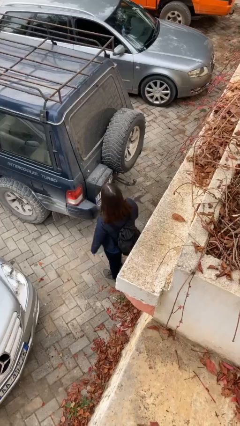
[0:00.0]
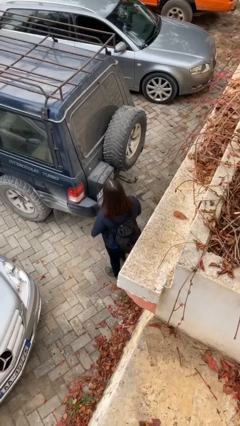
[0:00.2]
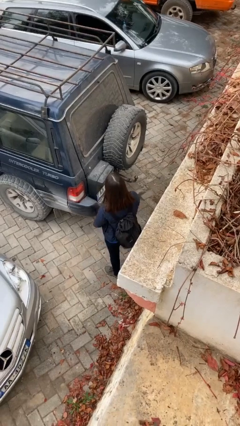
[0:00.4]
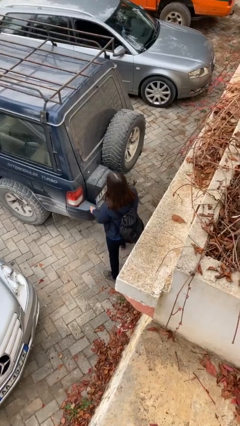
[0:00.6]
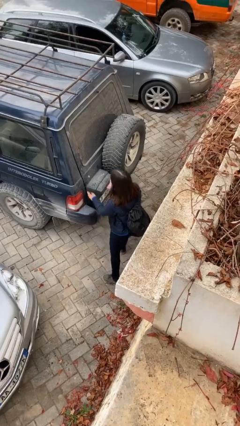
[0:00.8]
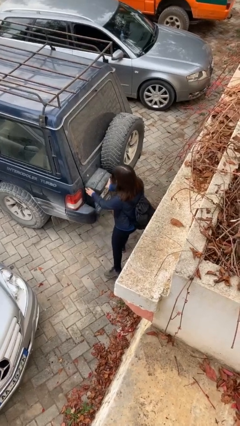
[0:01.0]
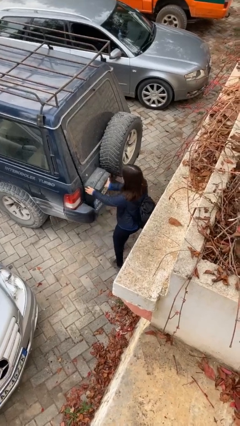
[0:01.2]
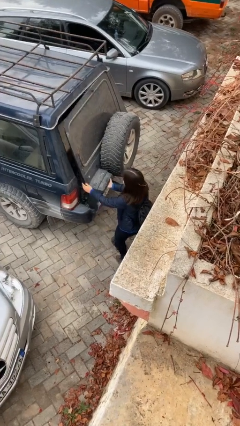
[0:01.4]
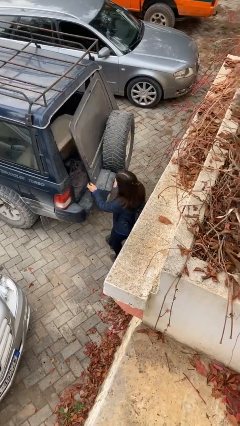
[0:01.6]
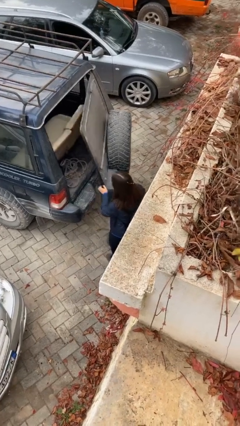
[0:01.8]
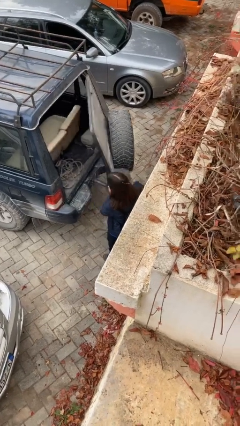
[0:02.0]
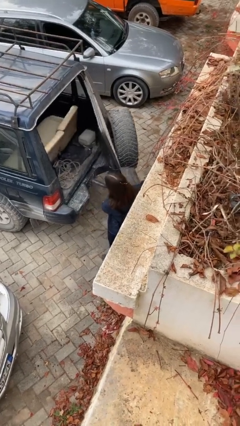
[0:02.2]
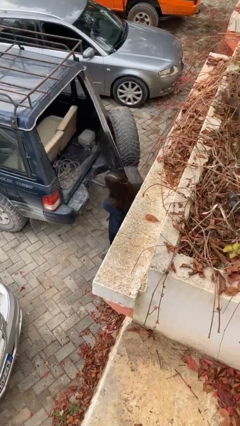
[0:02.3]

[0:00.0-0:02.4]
person opens car trunk

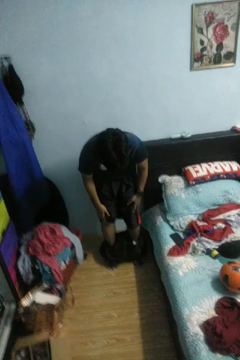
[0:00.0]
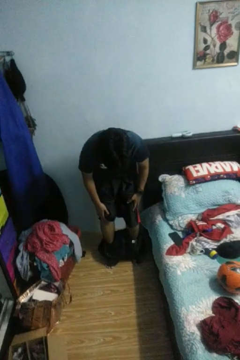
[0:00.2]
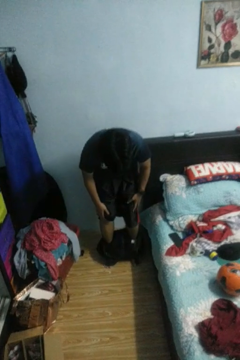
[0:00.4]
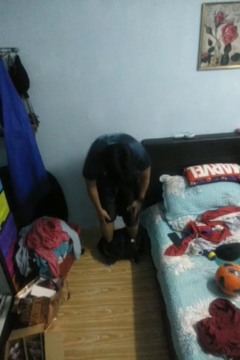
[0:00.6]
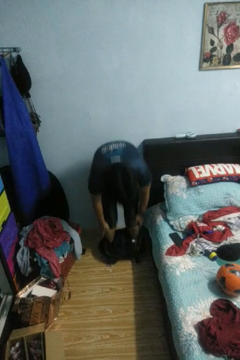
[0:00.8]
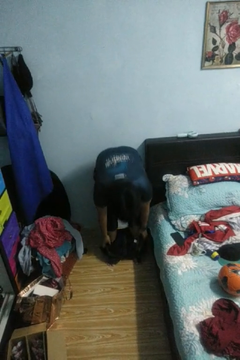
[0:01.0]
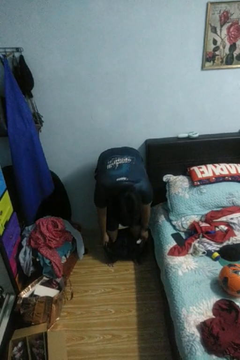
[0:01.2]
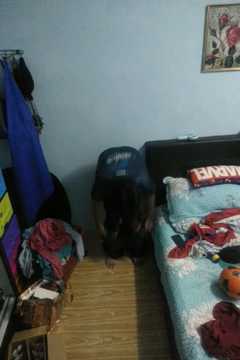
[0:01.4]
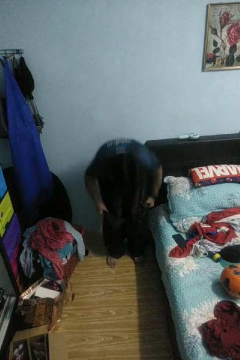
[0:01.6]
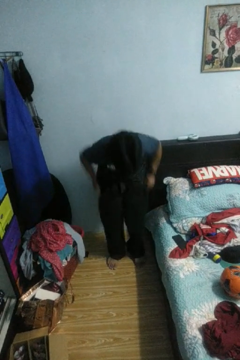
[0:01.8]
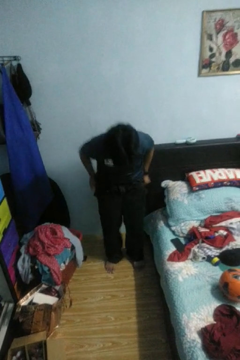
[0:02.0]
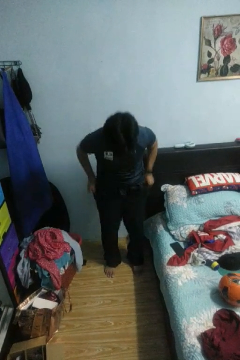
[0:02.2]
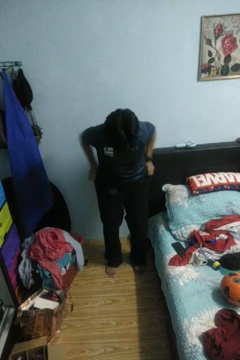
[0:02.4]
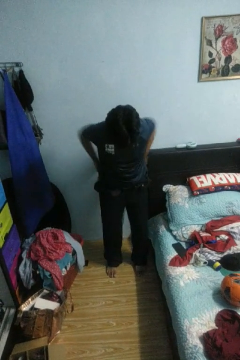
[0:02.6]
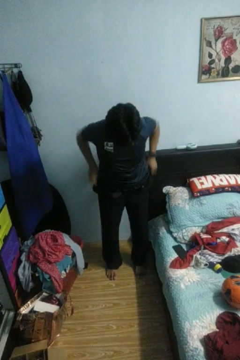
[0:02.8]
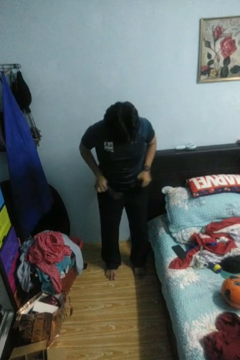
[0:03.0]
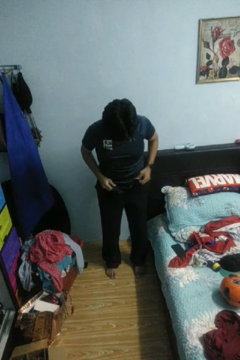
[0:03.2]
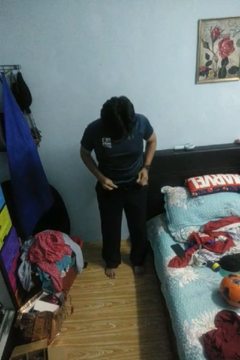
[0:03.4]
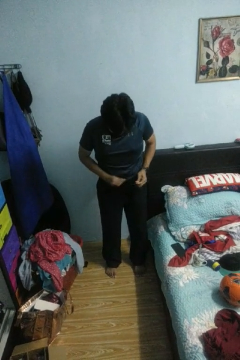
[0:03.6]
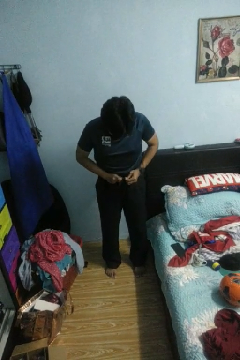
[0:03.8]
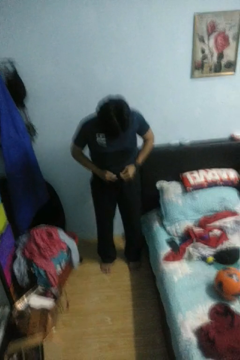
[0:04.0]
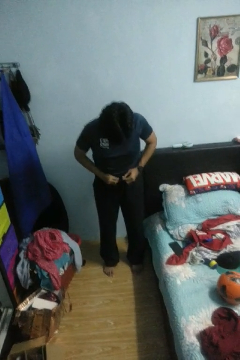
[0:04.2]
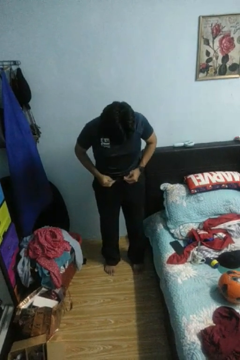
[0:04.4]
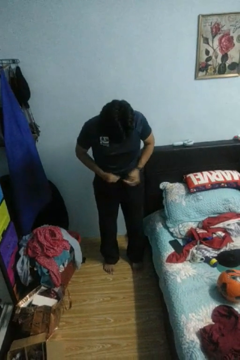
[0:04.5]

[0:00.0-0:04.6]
person puts on pants

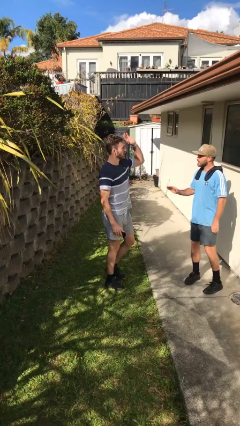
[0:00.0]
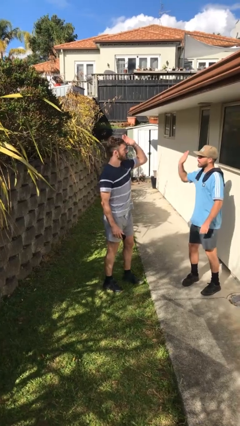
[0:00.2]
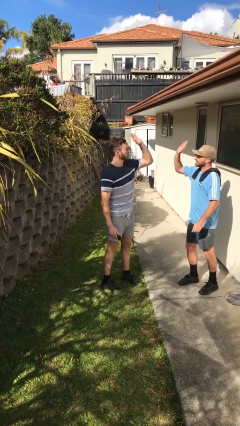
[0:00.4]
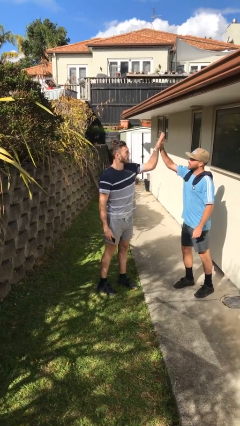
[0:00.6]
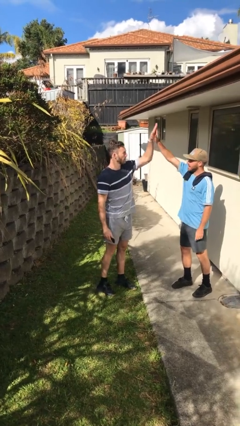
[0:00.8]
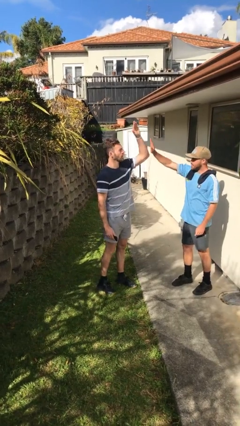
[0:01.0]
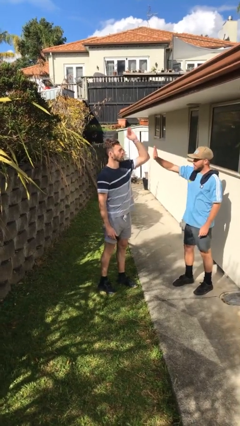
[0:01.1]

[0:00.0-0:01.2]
person highfives hand

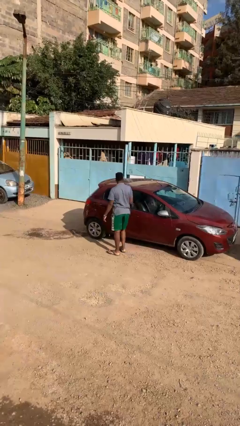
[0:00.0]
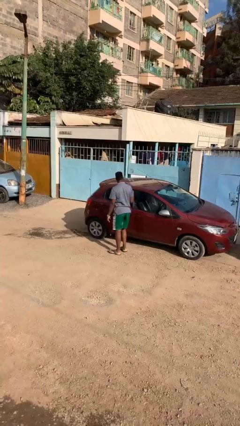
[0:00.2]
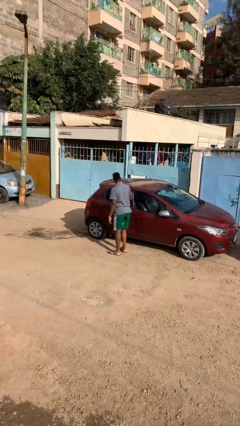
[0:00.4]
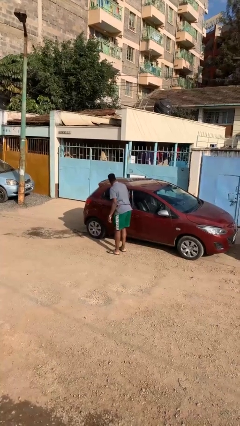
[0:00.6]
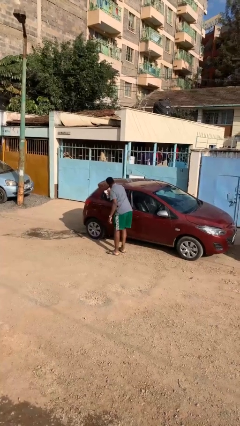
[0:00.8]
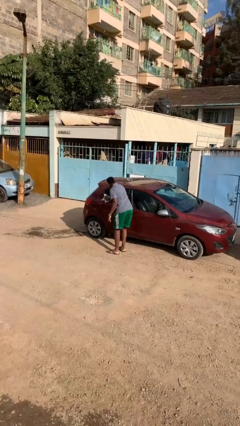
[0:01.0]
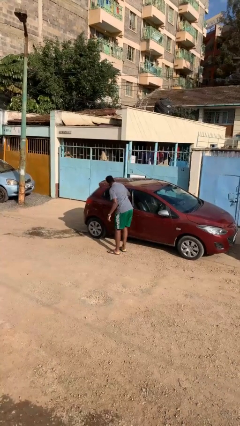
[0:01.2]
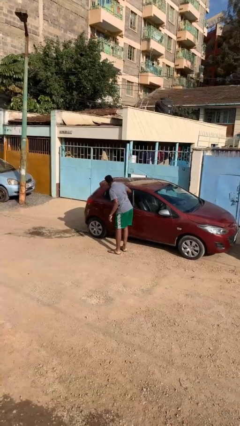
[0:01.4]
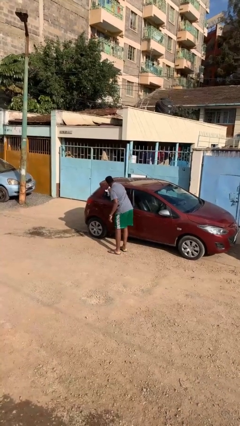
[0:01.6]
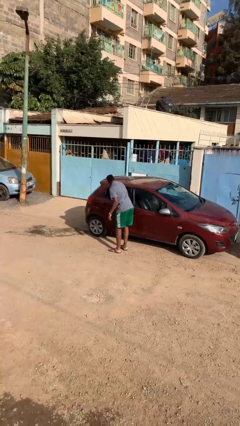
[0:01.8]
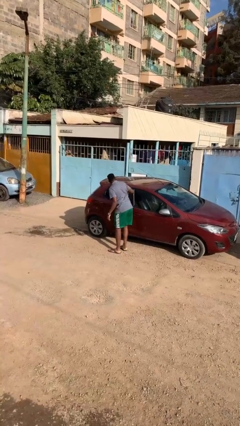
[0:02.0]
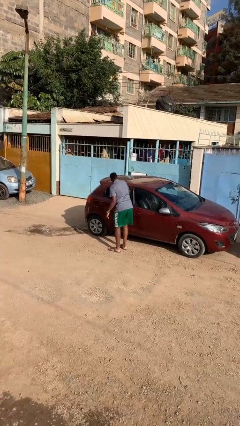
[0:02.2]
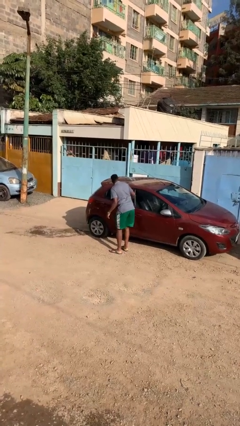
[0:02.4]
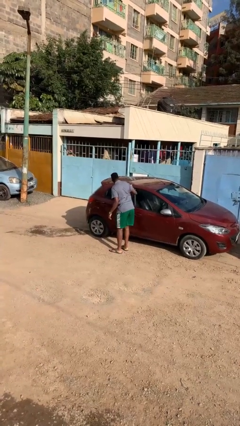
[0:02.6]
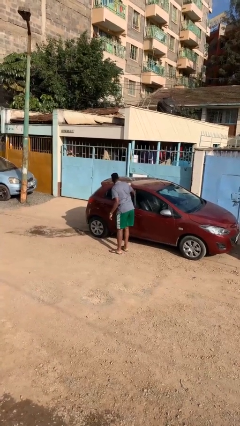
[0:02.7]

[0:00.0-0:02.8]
person polishes car with rag

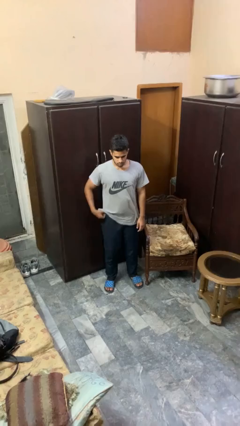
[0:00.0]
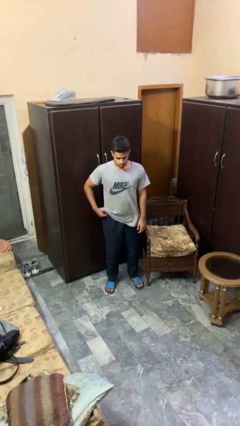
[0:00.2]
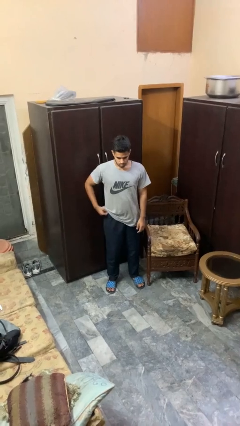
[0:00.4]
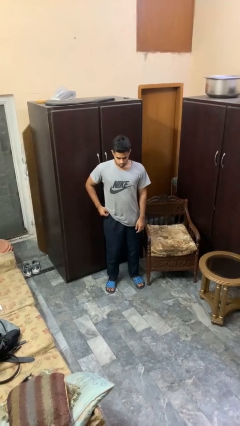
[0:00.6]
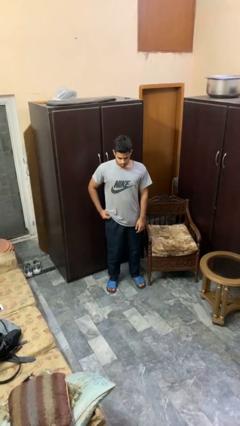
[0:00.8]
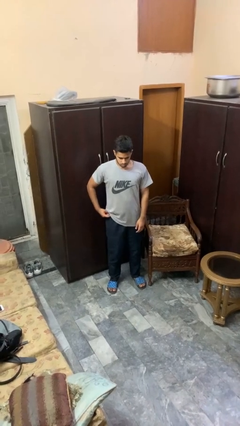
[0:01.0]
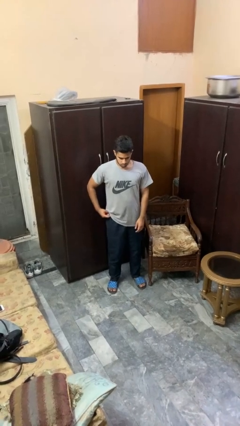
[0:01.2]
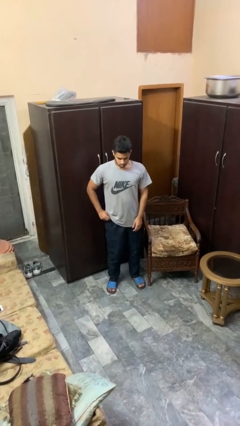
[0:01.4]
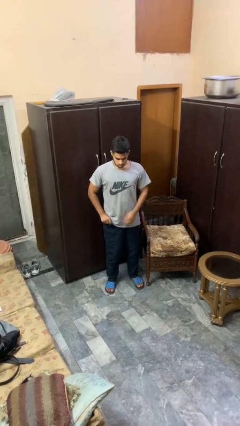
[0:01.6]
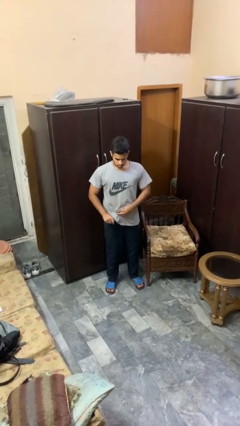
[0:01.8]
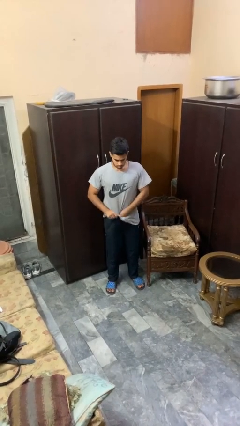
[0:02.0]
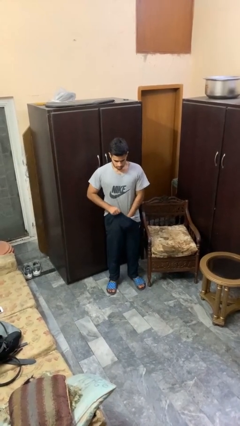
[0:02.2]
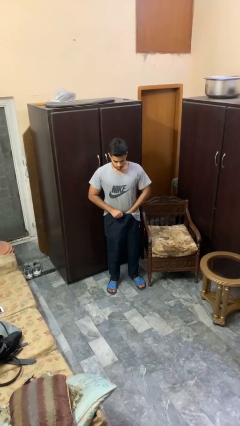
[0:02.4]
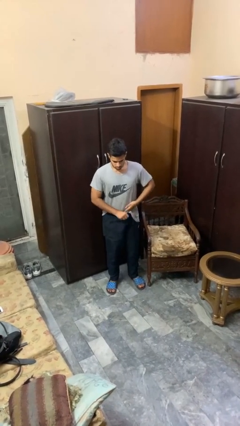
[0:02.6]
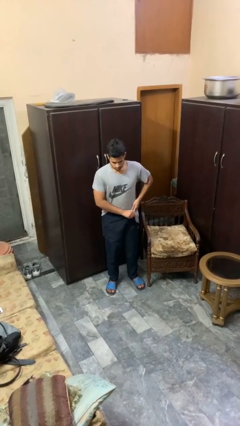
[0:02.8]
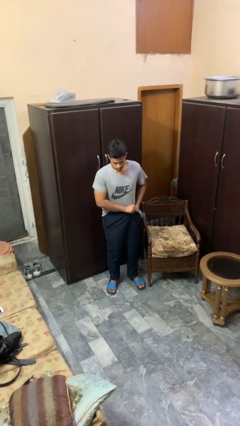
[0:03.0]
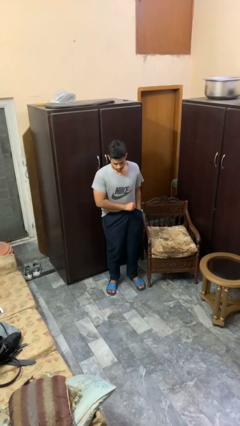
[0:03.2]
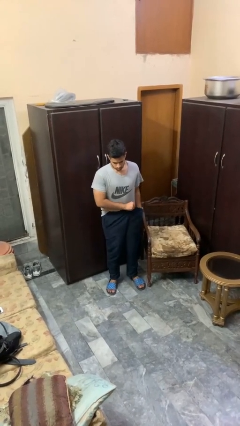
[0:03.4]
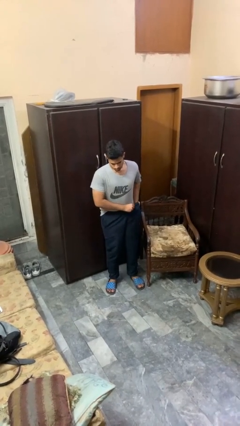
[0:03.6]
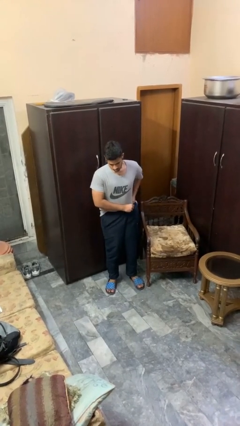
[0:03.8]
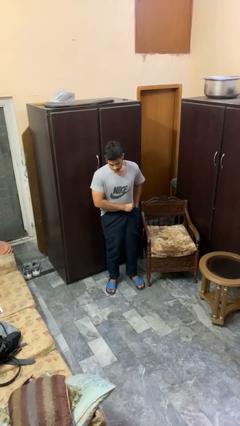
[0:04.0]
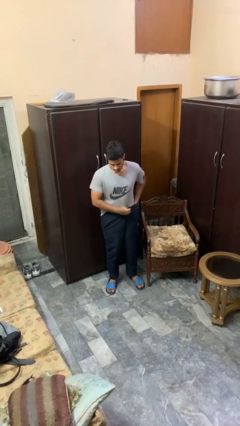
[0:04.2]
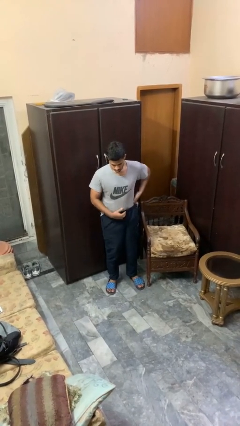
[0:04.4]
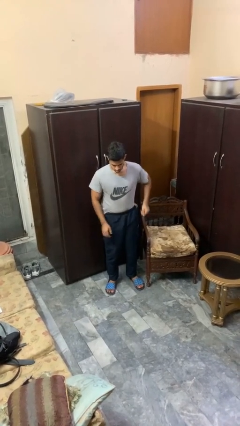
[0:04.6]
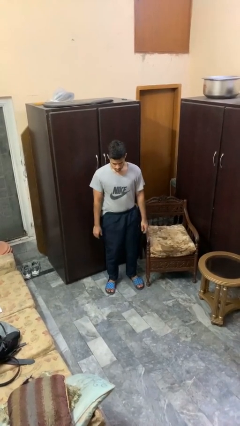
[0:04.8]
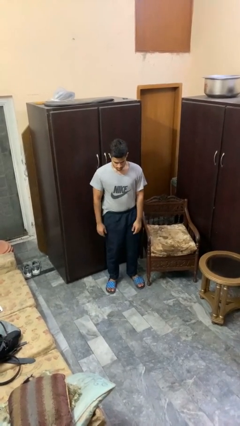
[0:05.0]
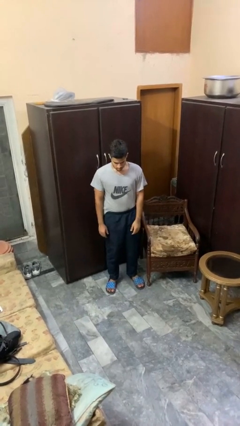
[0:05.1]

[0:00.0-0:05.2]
person tucks in shirt

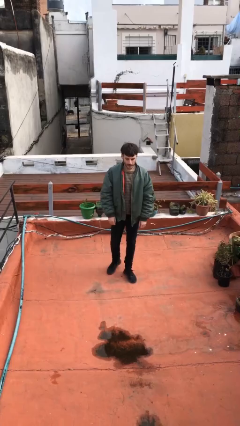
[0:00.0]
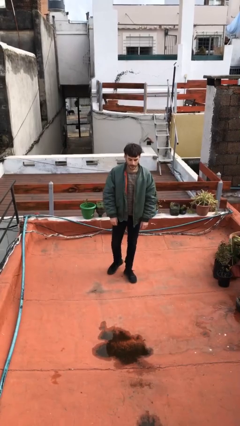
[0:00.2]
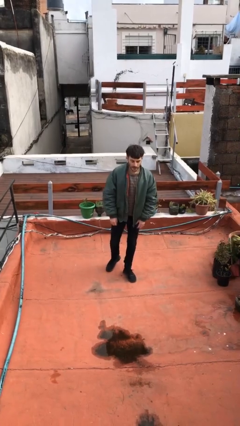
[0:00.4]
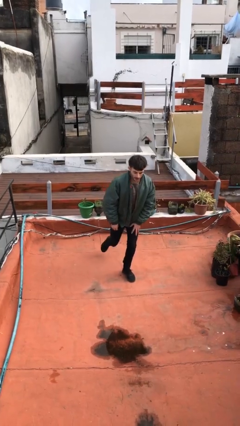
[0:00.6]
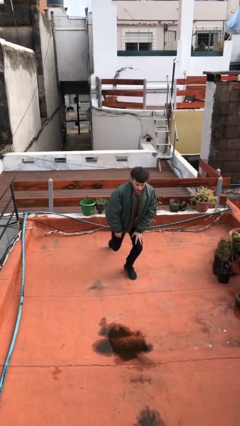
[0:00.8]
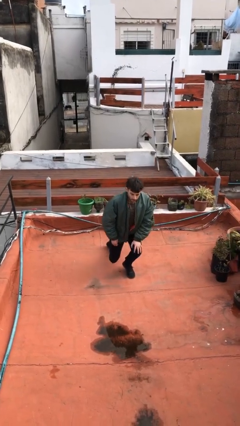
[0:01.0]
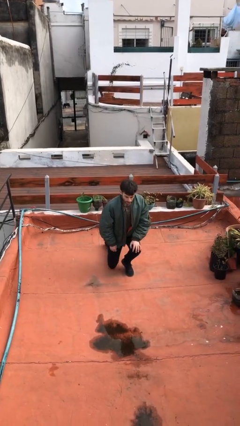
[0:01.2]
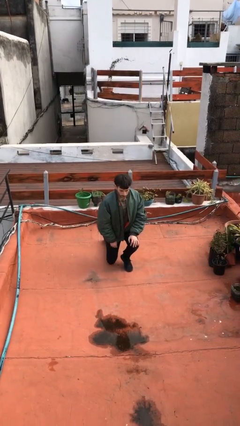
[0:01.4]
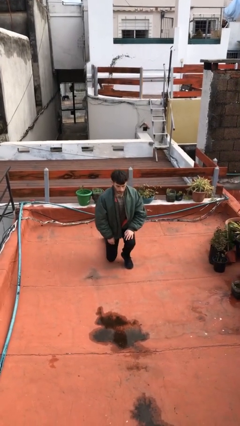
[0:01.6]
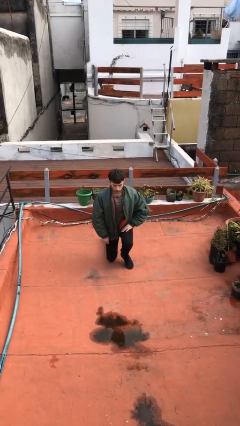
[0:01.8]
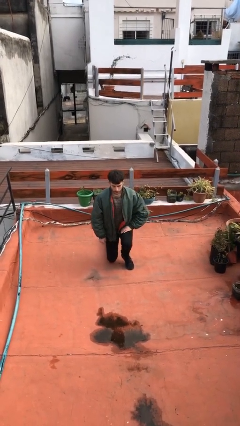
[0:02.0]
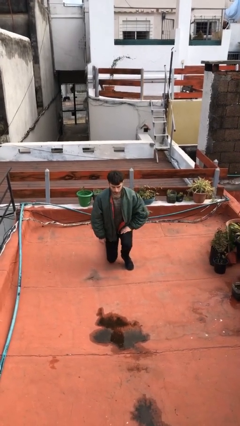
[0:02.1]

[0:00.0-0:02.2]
person kneels
